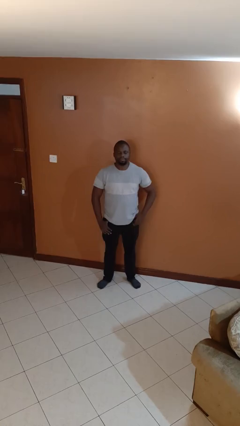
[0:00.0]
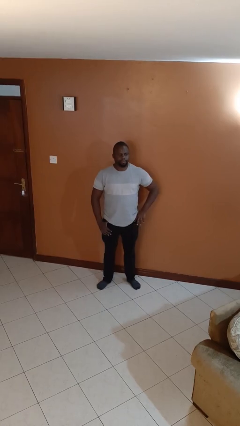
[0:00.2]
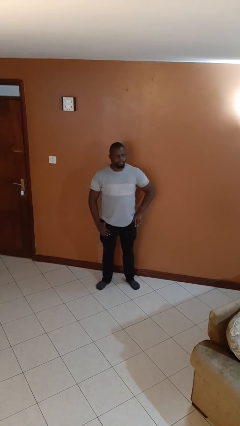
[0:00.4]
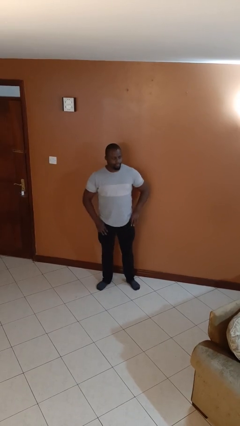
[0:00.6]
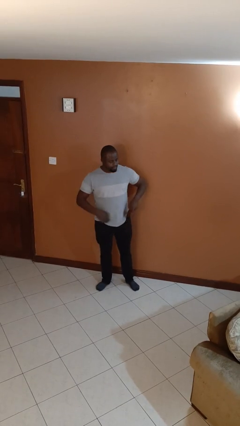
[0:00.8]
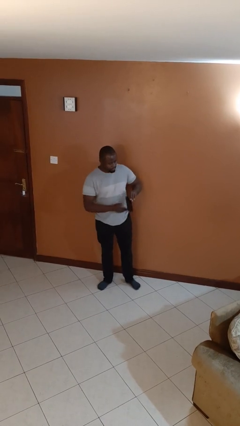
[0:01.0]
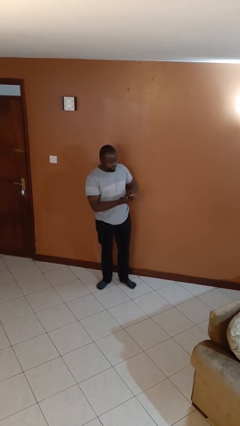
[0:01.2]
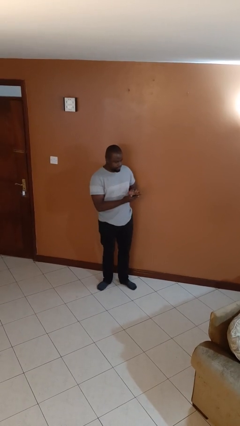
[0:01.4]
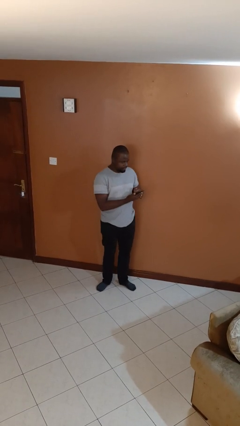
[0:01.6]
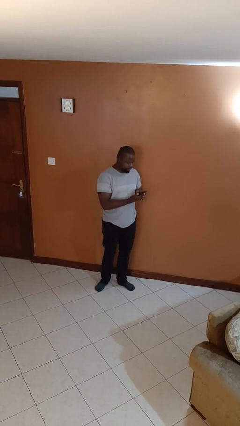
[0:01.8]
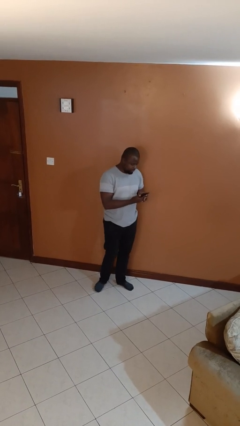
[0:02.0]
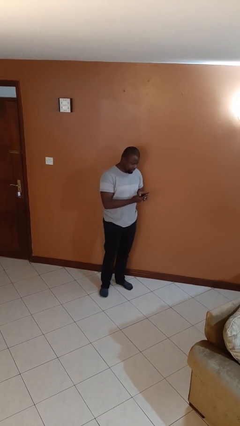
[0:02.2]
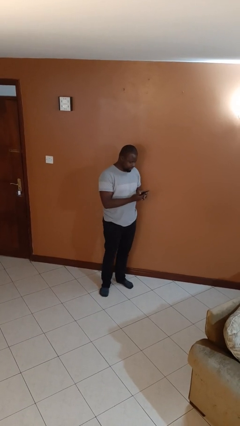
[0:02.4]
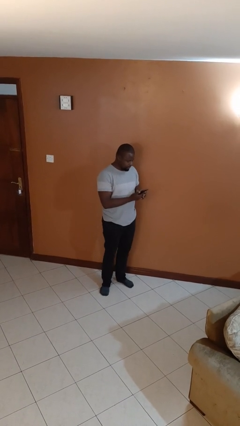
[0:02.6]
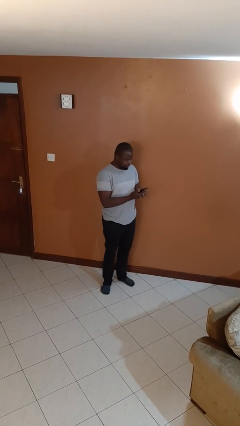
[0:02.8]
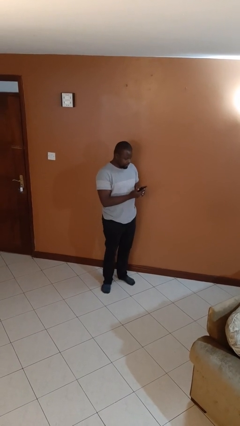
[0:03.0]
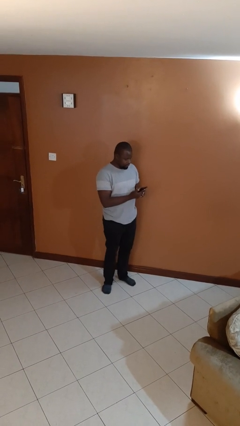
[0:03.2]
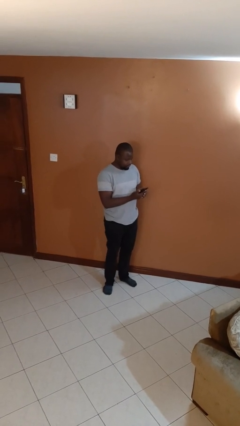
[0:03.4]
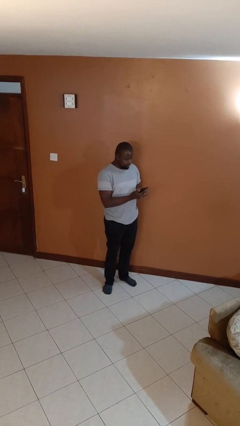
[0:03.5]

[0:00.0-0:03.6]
person takes phone from pocket

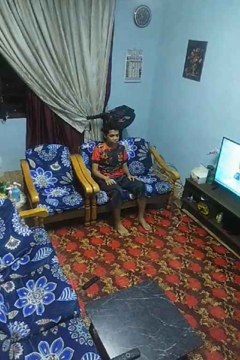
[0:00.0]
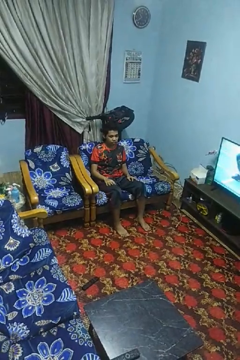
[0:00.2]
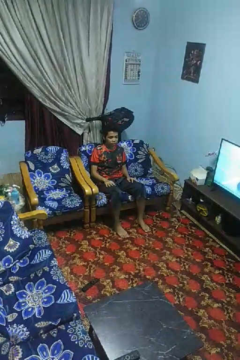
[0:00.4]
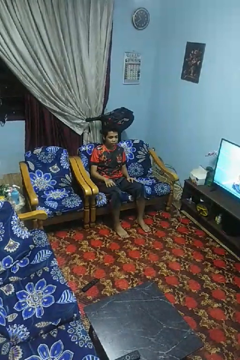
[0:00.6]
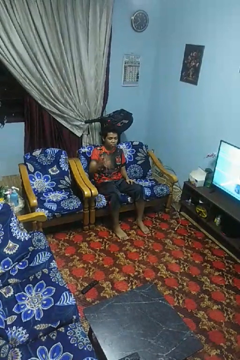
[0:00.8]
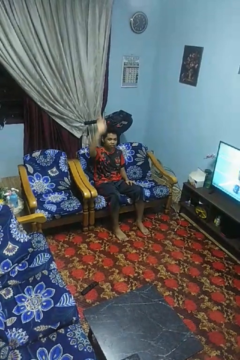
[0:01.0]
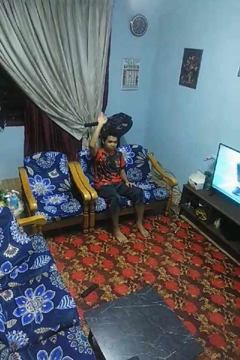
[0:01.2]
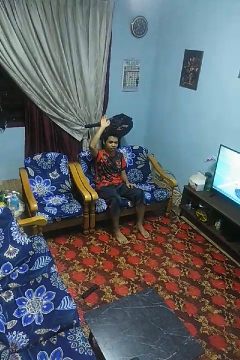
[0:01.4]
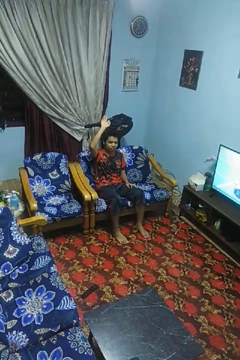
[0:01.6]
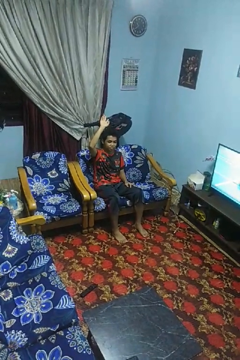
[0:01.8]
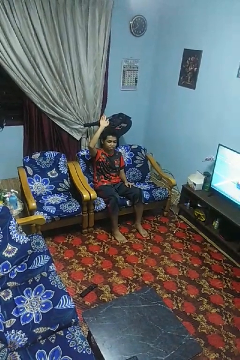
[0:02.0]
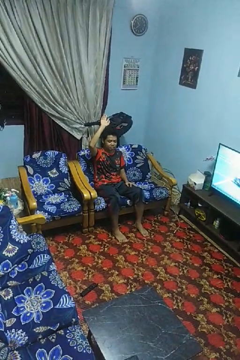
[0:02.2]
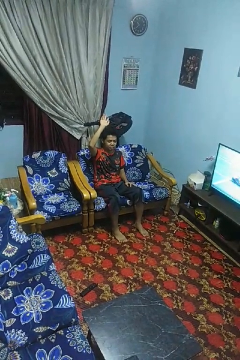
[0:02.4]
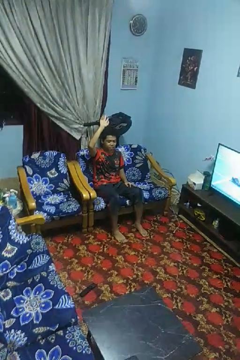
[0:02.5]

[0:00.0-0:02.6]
person gestures raise hand

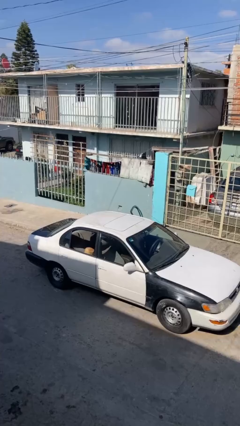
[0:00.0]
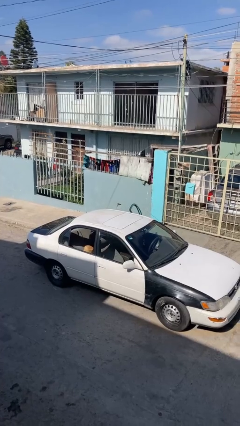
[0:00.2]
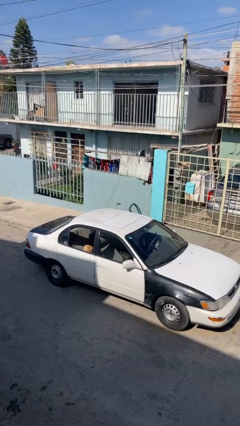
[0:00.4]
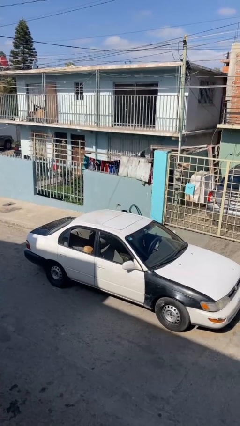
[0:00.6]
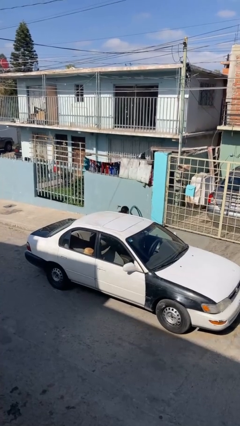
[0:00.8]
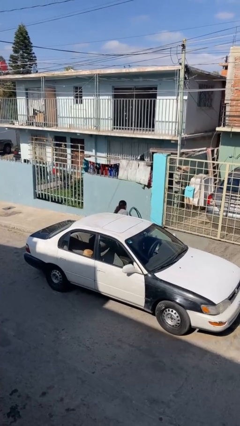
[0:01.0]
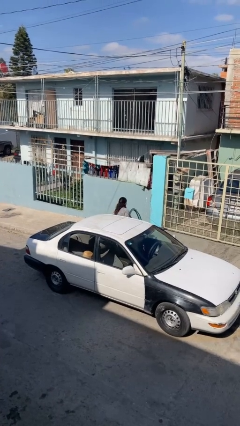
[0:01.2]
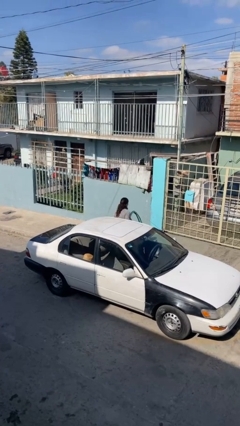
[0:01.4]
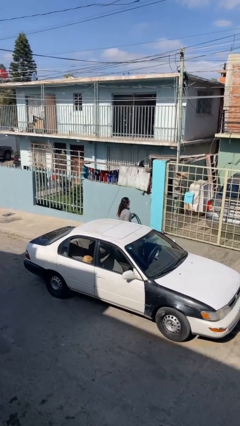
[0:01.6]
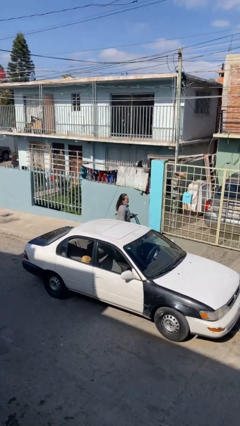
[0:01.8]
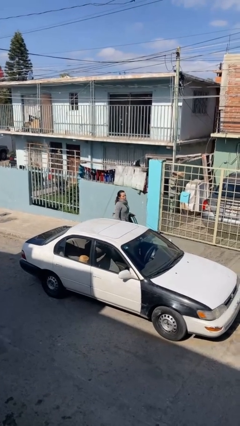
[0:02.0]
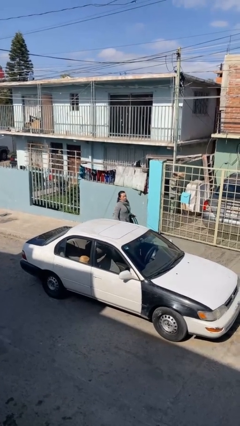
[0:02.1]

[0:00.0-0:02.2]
person exits car

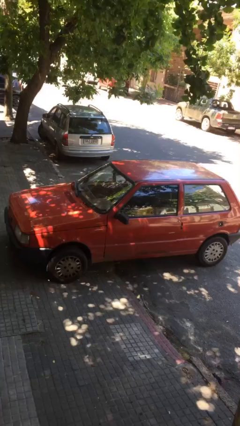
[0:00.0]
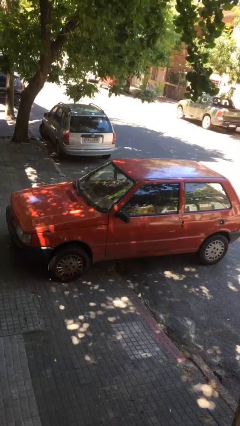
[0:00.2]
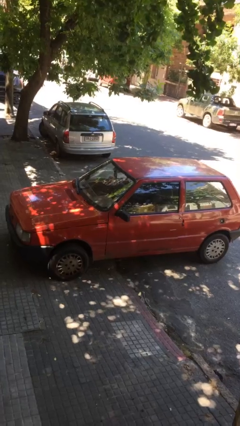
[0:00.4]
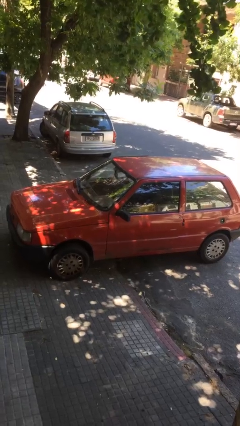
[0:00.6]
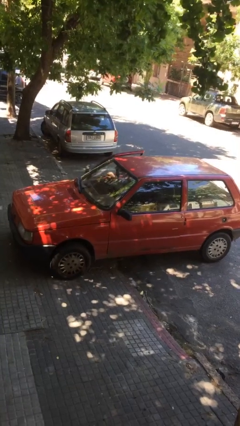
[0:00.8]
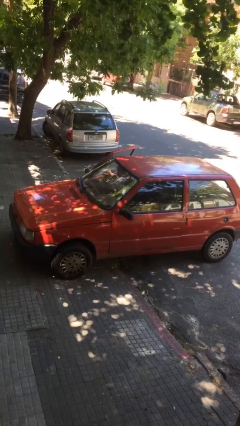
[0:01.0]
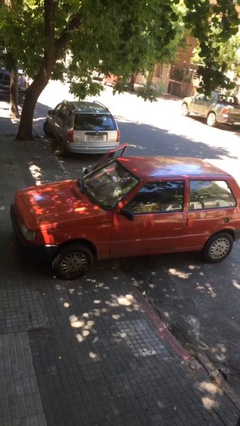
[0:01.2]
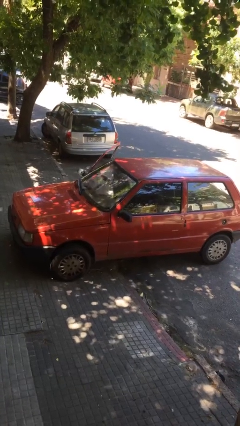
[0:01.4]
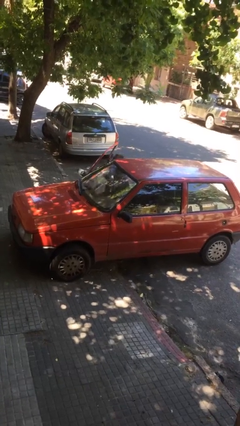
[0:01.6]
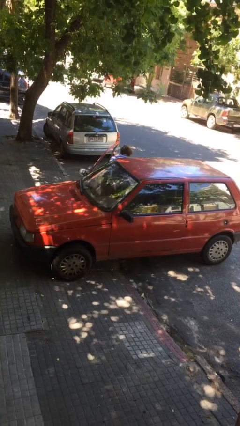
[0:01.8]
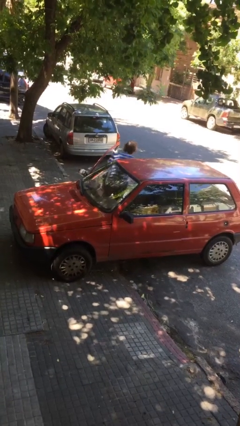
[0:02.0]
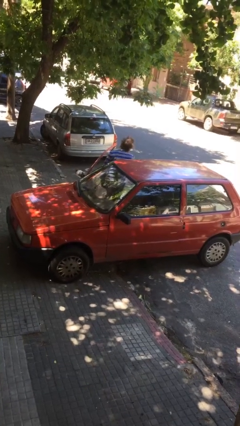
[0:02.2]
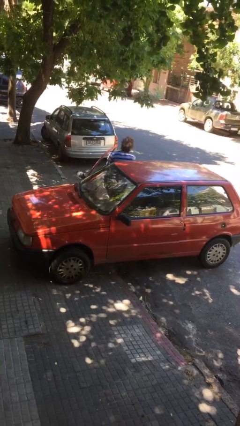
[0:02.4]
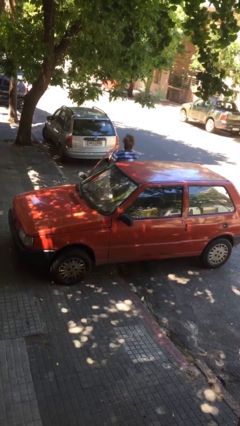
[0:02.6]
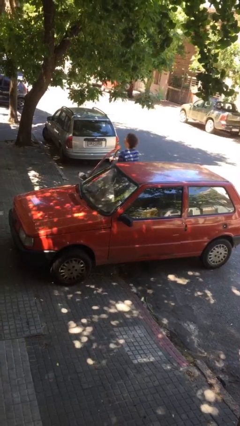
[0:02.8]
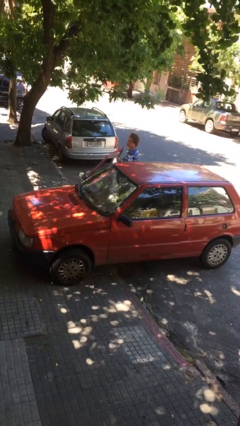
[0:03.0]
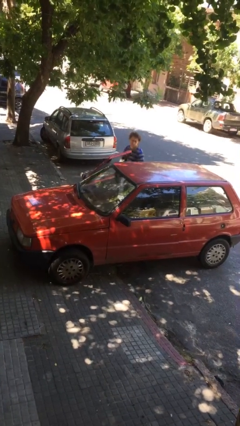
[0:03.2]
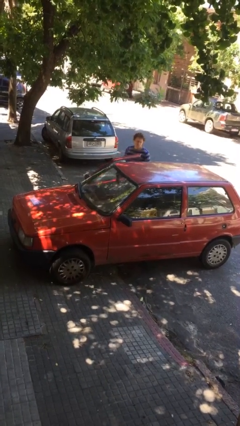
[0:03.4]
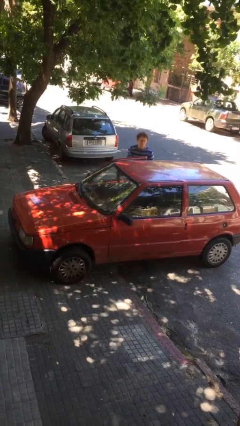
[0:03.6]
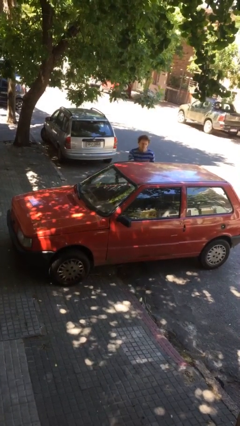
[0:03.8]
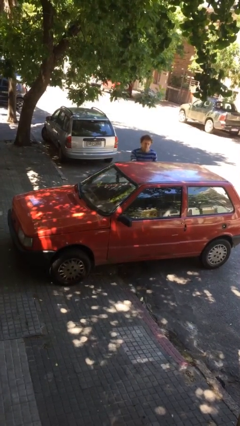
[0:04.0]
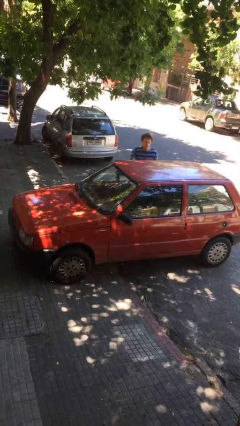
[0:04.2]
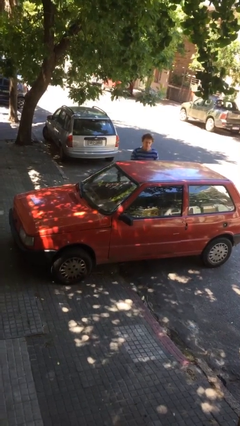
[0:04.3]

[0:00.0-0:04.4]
car drops off person

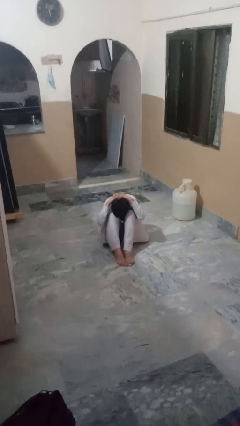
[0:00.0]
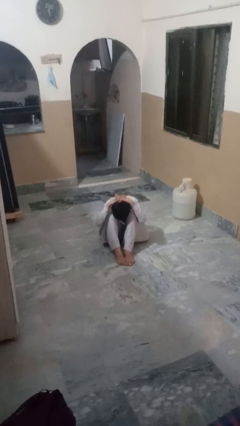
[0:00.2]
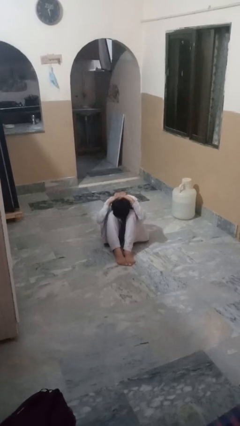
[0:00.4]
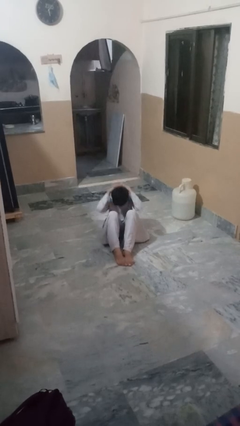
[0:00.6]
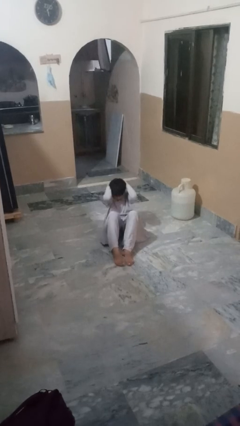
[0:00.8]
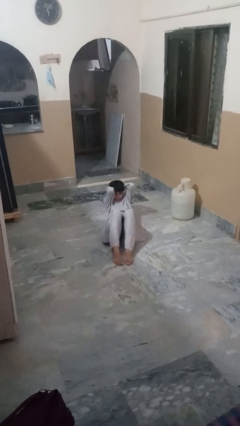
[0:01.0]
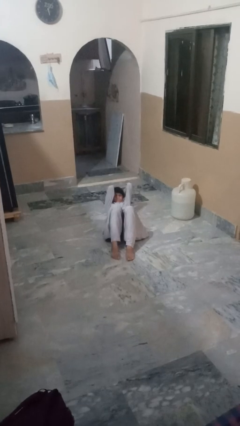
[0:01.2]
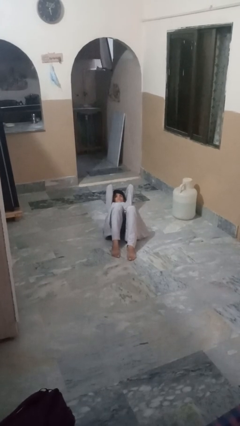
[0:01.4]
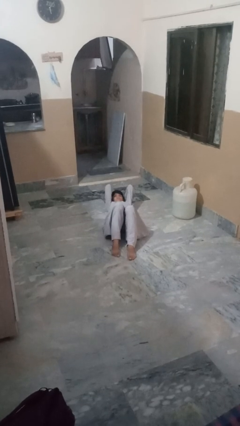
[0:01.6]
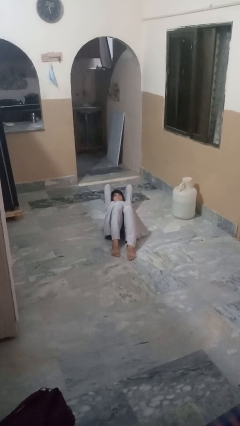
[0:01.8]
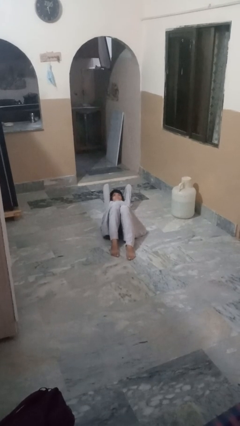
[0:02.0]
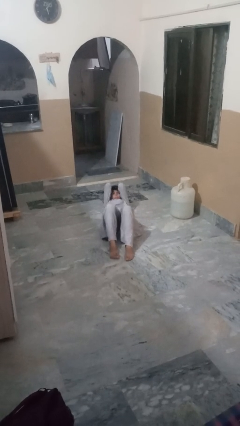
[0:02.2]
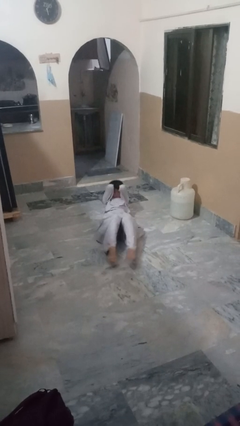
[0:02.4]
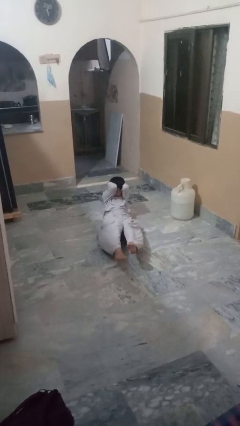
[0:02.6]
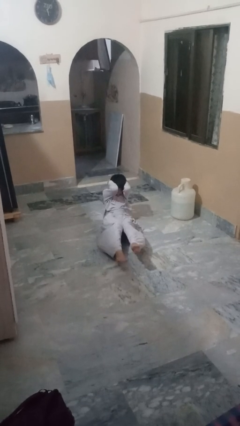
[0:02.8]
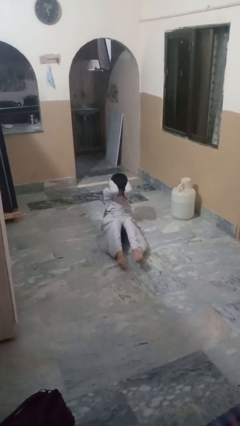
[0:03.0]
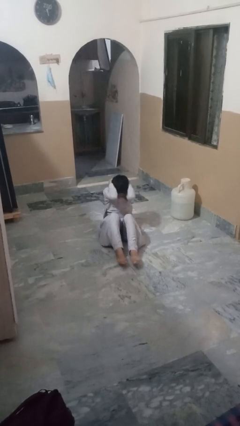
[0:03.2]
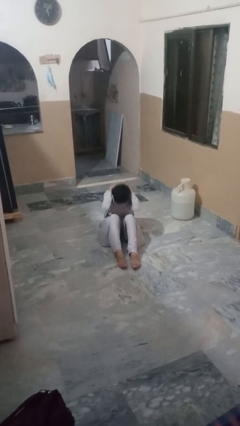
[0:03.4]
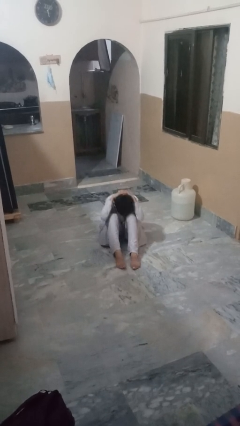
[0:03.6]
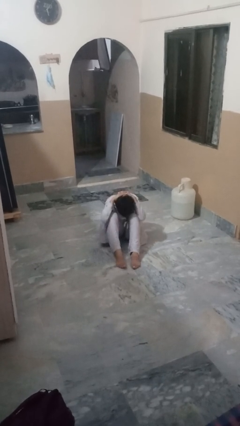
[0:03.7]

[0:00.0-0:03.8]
person exercises with situp

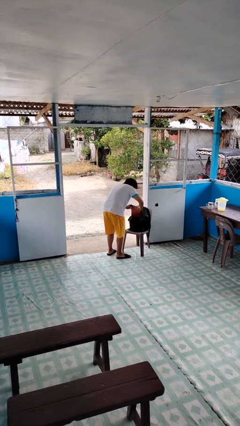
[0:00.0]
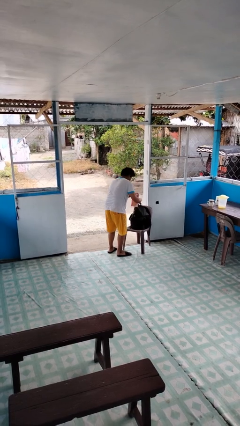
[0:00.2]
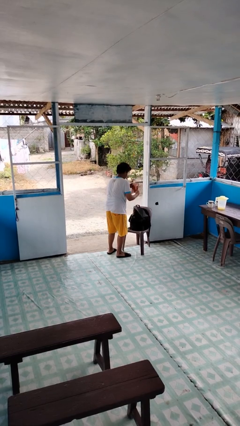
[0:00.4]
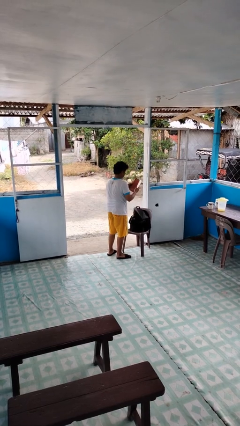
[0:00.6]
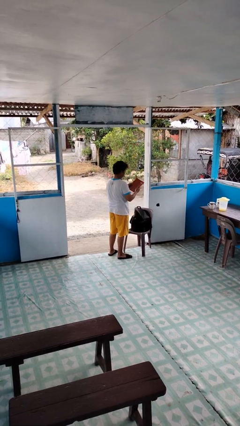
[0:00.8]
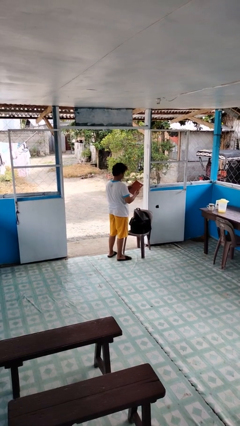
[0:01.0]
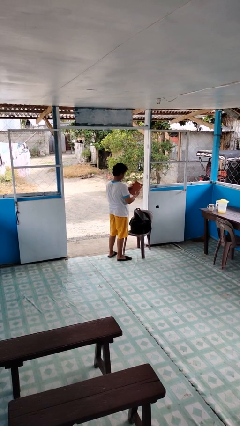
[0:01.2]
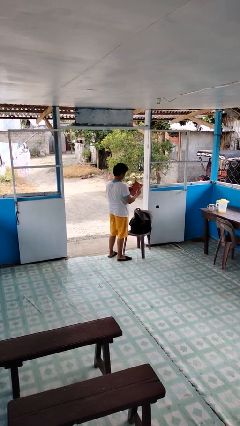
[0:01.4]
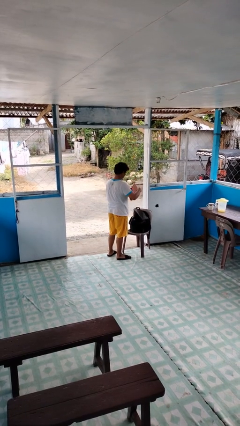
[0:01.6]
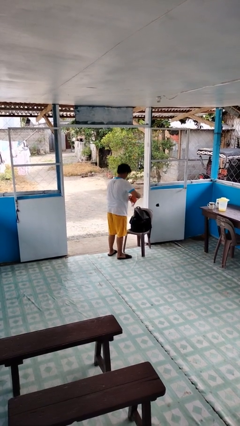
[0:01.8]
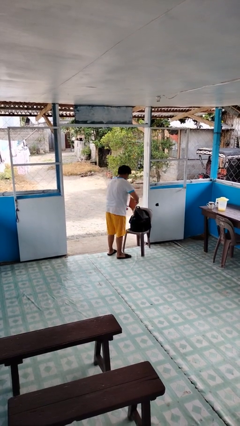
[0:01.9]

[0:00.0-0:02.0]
person takes object from backpack
